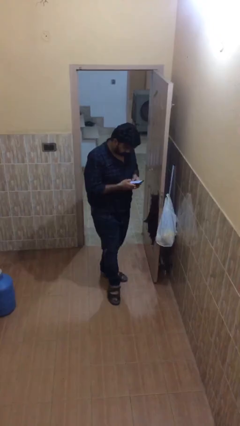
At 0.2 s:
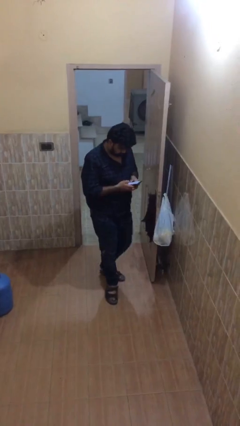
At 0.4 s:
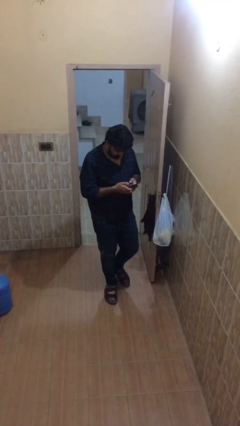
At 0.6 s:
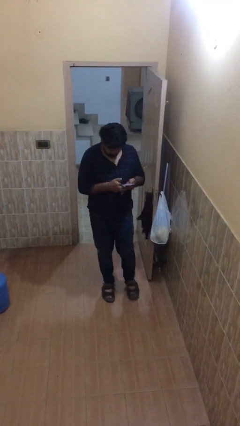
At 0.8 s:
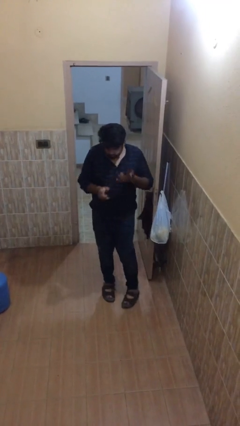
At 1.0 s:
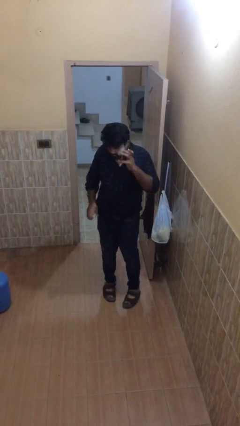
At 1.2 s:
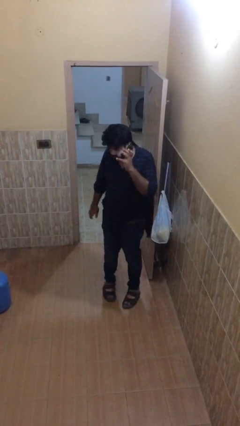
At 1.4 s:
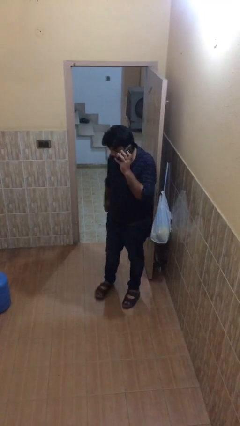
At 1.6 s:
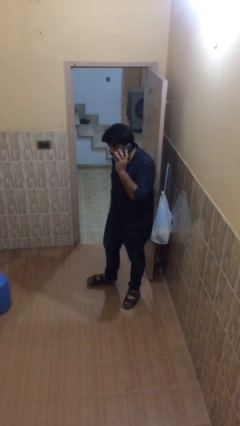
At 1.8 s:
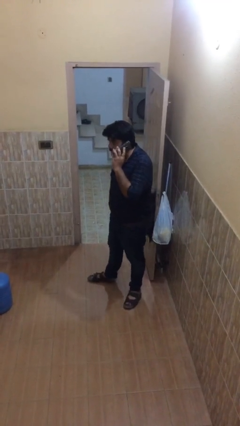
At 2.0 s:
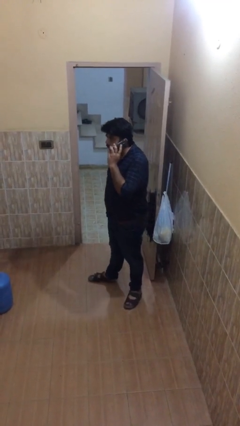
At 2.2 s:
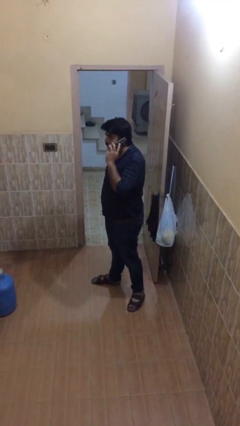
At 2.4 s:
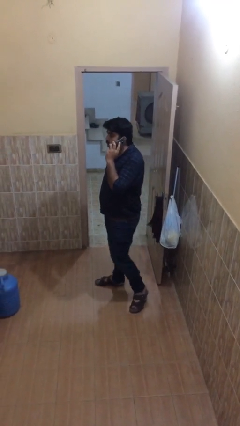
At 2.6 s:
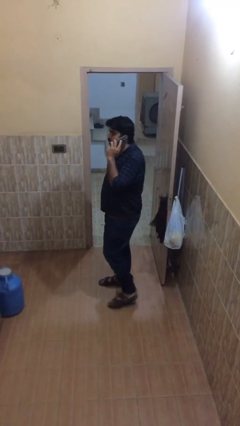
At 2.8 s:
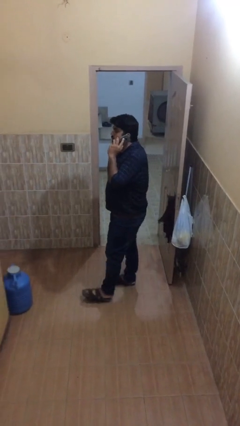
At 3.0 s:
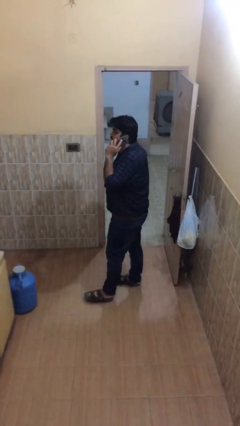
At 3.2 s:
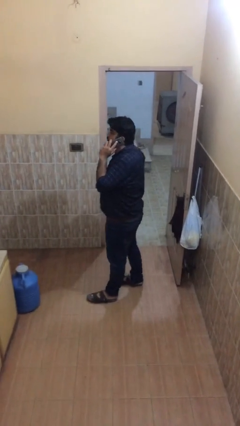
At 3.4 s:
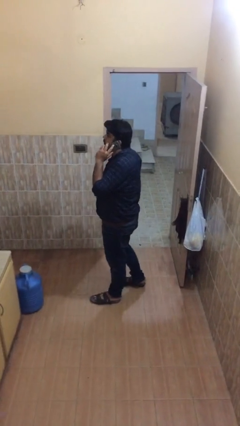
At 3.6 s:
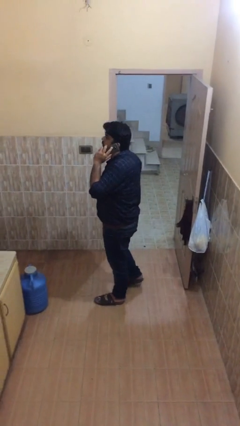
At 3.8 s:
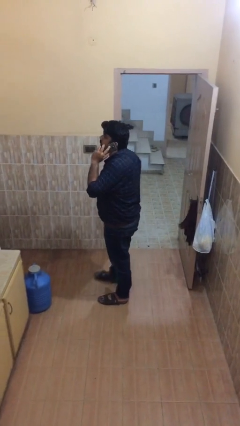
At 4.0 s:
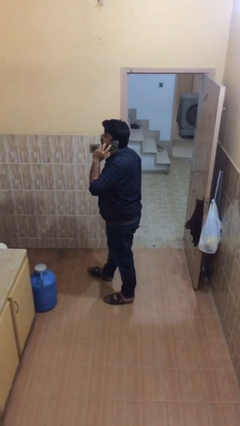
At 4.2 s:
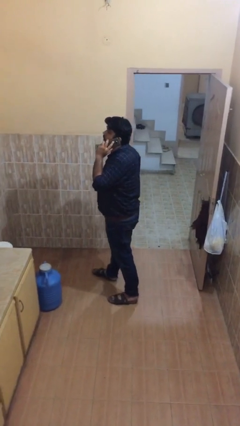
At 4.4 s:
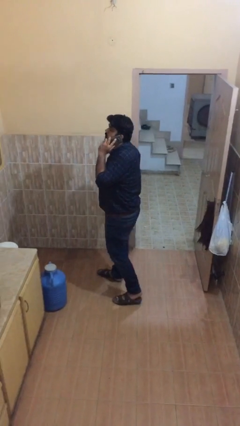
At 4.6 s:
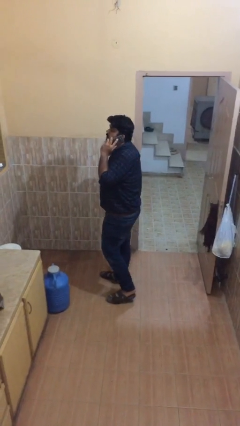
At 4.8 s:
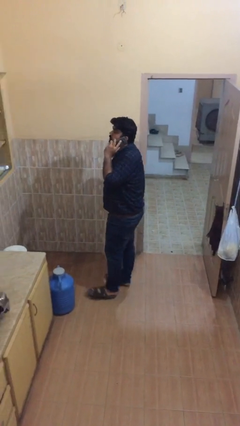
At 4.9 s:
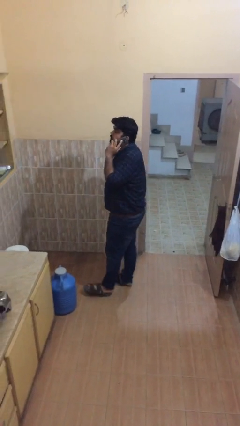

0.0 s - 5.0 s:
person talks on phone

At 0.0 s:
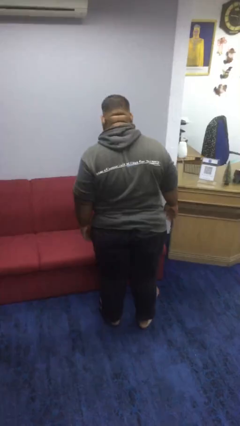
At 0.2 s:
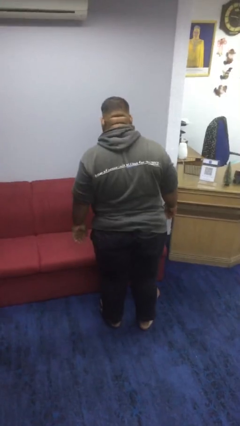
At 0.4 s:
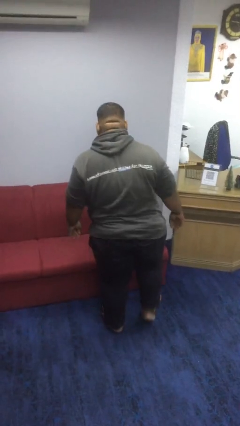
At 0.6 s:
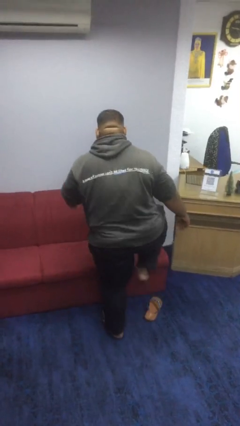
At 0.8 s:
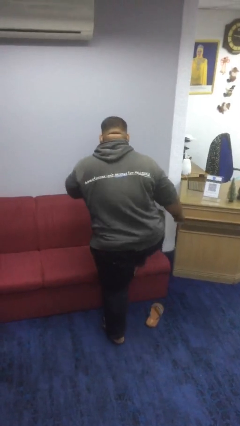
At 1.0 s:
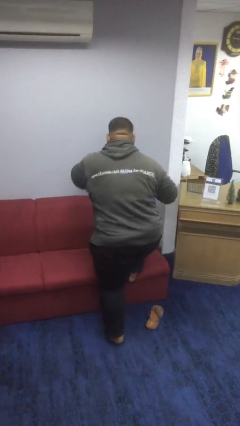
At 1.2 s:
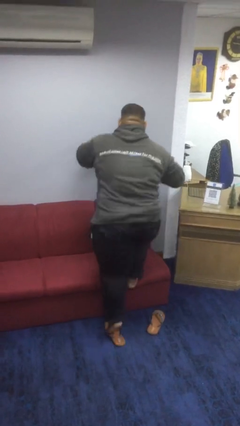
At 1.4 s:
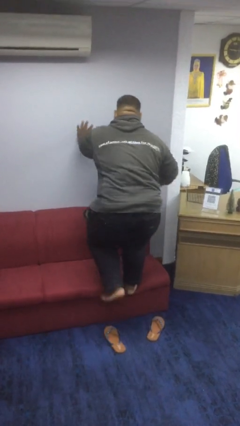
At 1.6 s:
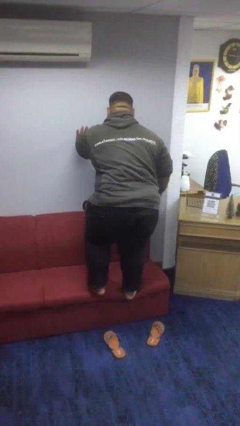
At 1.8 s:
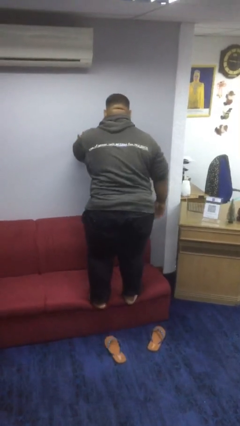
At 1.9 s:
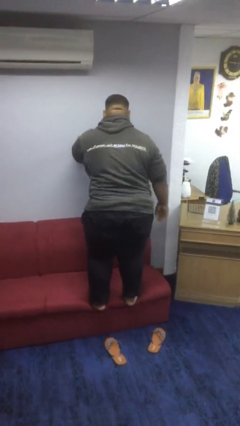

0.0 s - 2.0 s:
person climbs on couch

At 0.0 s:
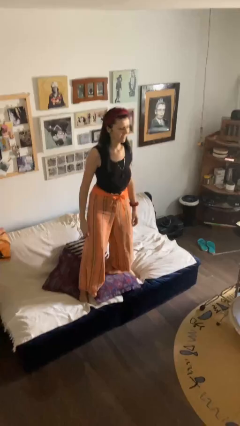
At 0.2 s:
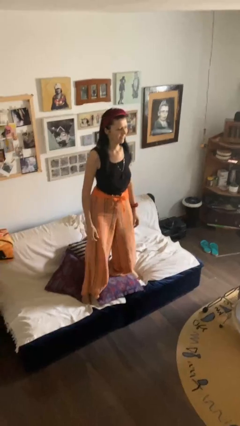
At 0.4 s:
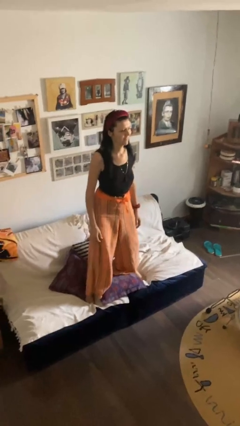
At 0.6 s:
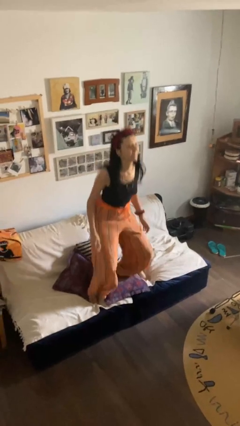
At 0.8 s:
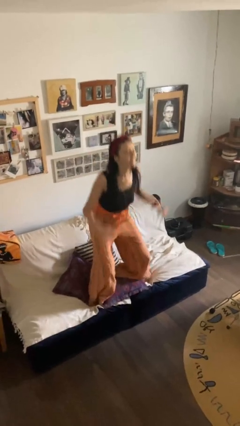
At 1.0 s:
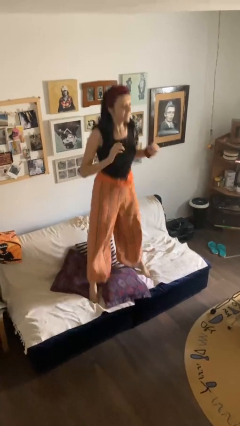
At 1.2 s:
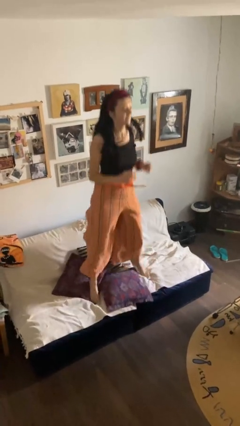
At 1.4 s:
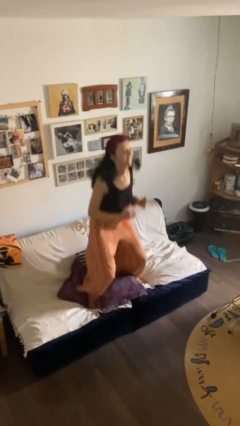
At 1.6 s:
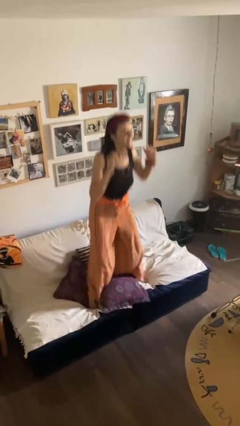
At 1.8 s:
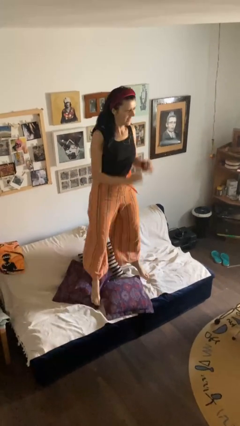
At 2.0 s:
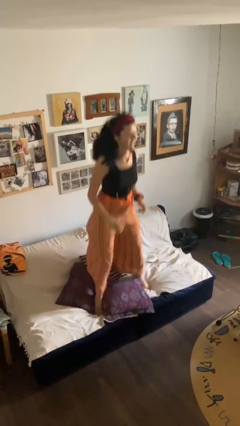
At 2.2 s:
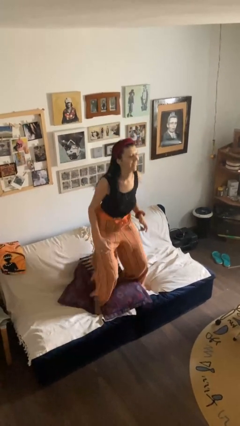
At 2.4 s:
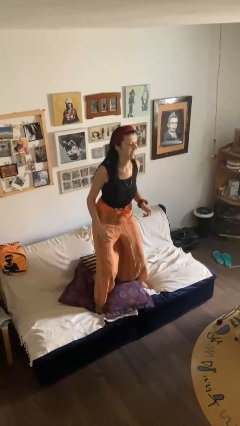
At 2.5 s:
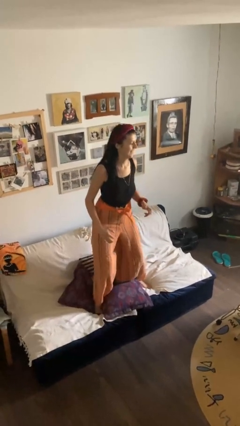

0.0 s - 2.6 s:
person jumps on couch

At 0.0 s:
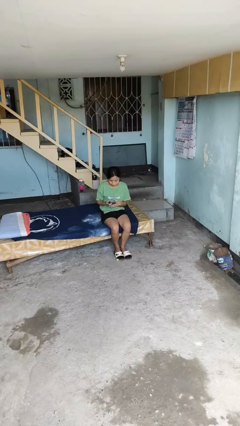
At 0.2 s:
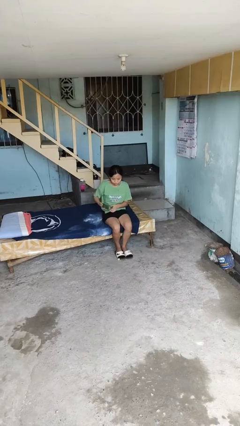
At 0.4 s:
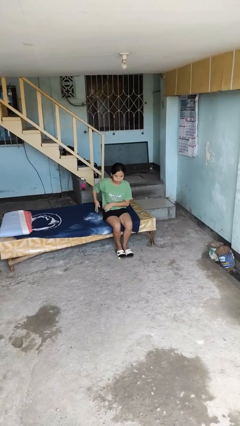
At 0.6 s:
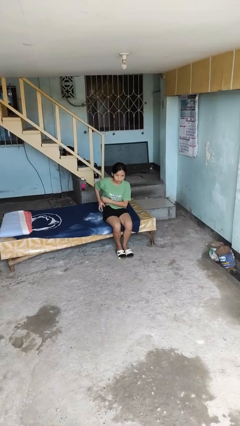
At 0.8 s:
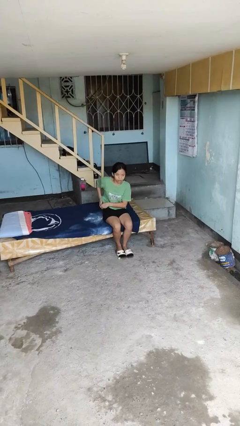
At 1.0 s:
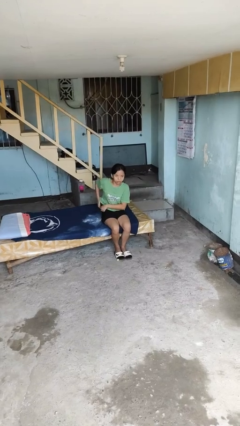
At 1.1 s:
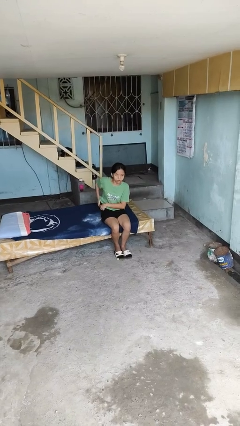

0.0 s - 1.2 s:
person puts phone into pocket

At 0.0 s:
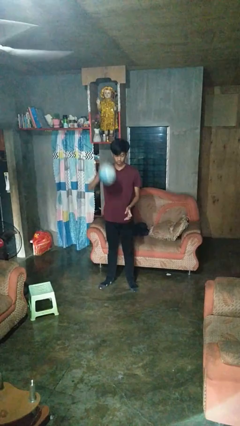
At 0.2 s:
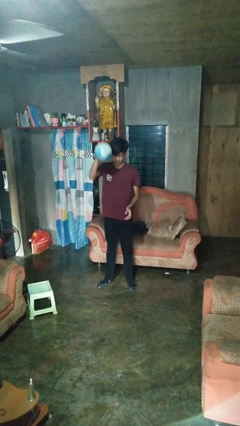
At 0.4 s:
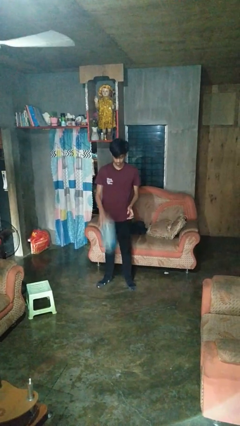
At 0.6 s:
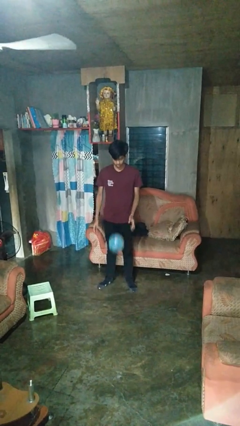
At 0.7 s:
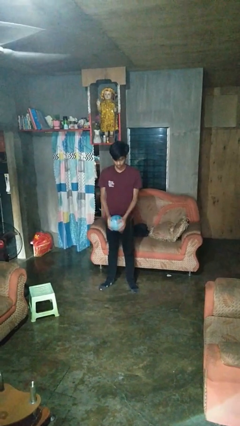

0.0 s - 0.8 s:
person bounces ball on floor

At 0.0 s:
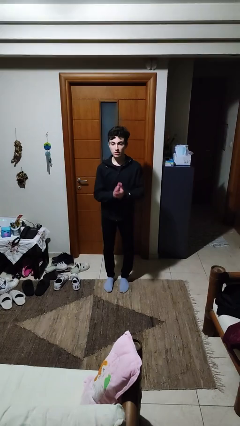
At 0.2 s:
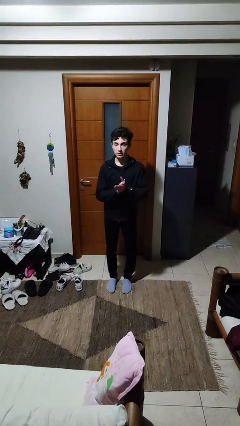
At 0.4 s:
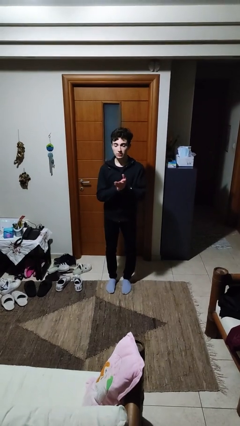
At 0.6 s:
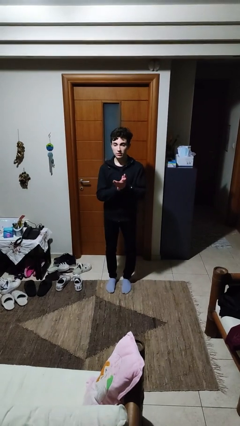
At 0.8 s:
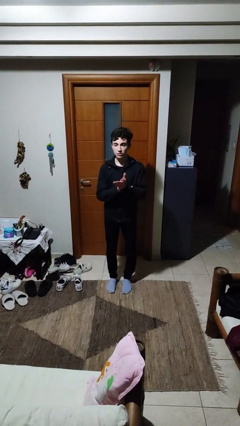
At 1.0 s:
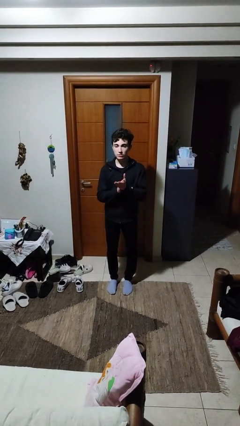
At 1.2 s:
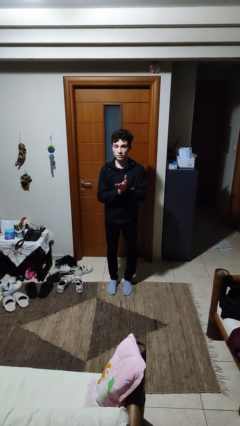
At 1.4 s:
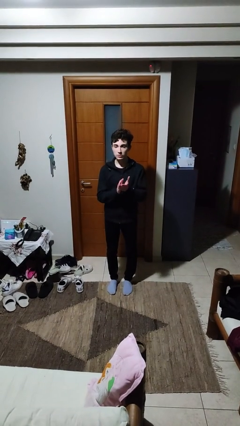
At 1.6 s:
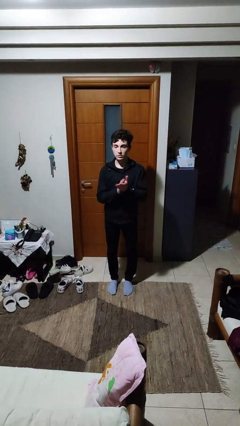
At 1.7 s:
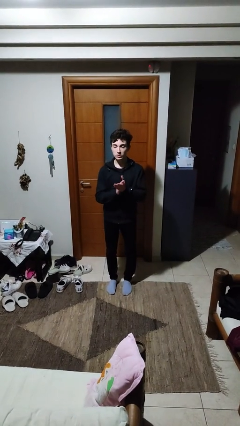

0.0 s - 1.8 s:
person claps hands

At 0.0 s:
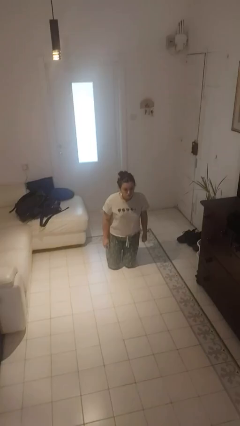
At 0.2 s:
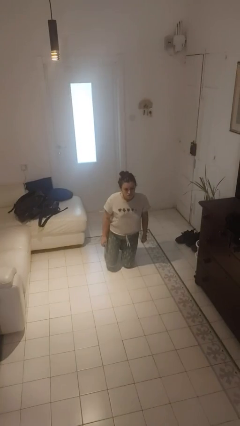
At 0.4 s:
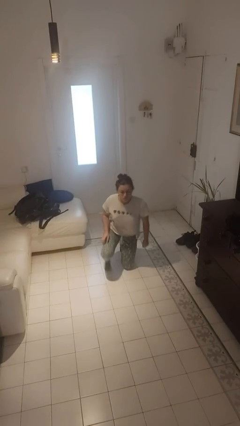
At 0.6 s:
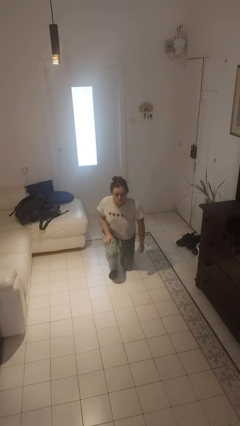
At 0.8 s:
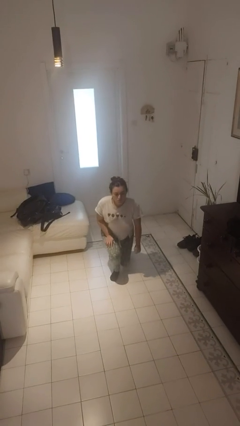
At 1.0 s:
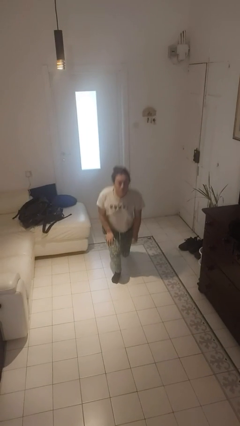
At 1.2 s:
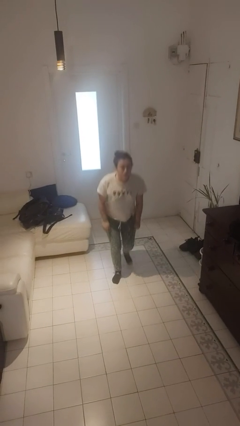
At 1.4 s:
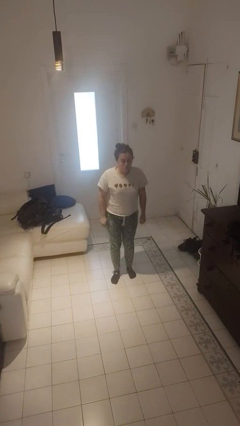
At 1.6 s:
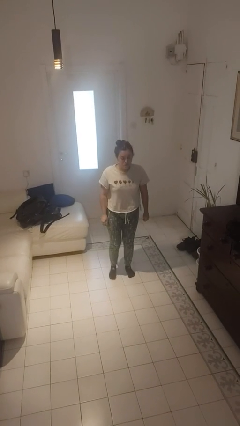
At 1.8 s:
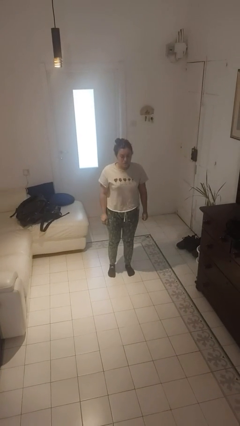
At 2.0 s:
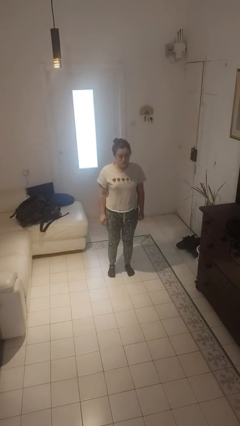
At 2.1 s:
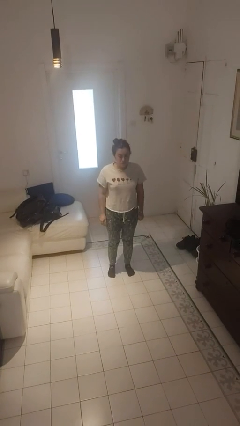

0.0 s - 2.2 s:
person stands up from floor

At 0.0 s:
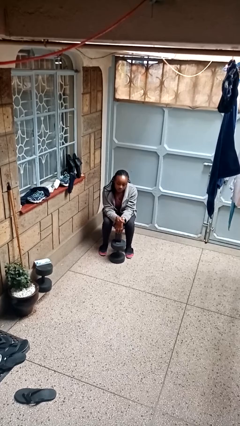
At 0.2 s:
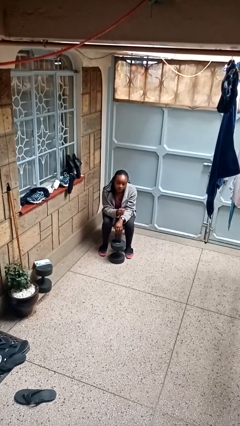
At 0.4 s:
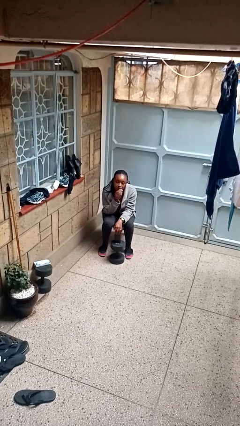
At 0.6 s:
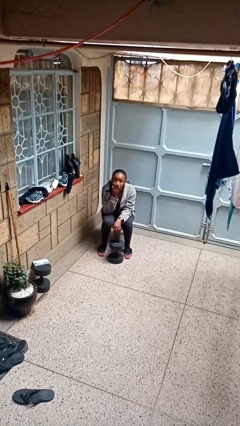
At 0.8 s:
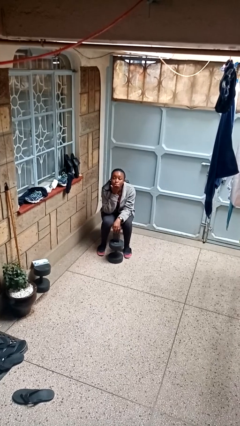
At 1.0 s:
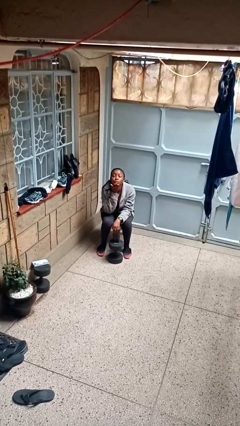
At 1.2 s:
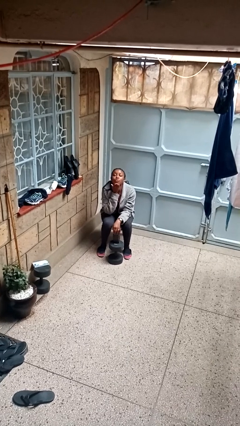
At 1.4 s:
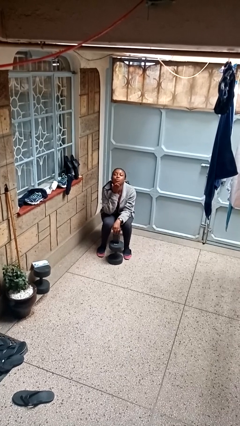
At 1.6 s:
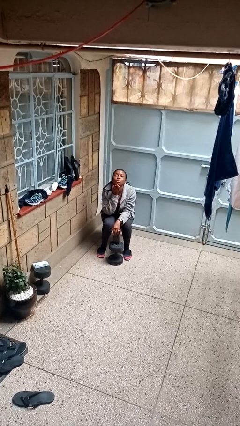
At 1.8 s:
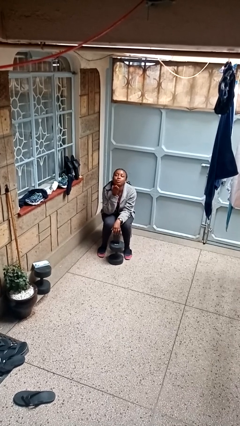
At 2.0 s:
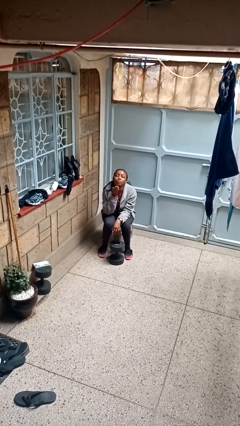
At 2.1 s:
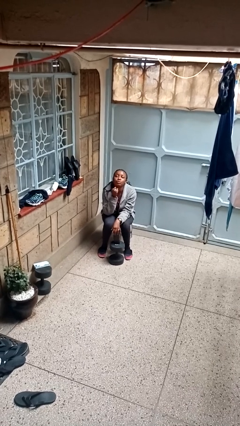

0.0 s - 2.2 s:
person gestures blow kiss
